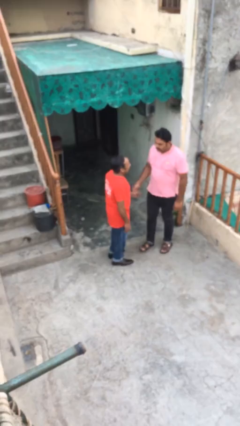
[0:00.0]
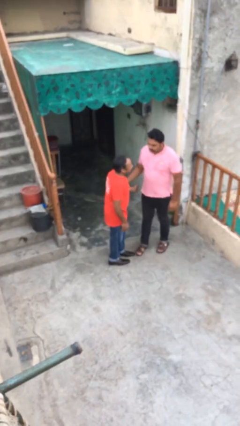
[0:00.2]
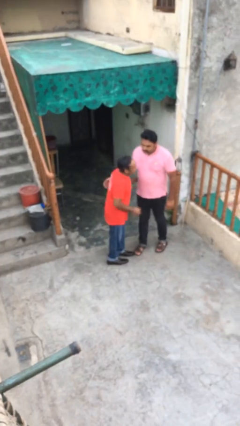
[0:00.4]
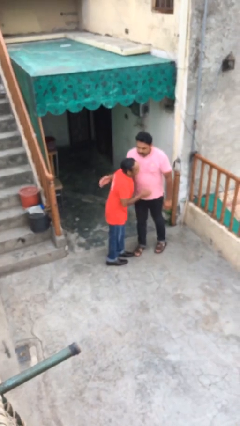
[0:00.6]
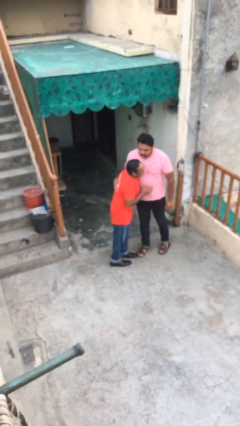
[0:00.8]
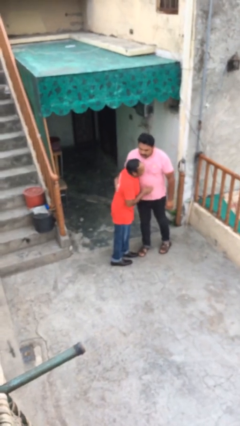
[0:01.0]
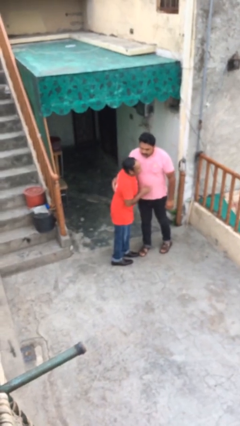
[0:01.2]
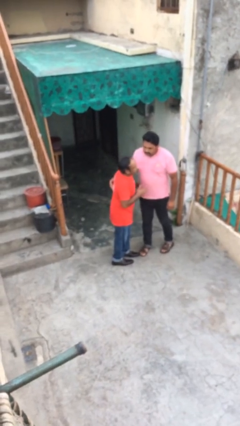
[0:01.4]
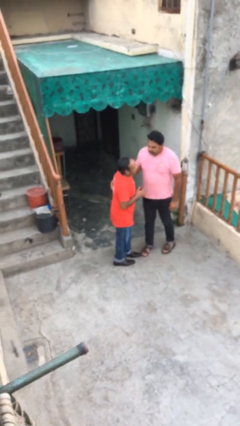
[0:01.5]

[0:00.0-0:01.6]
person embraces person

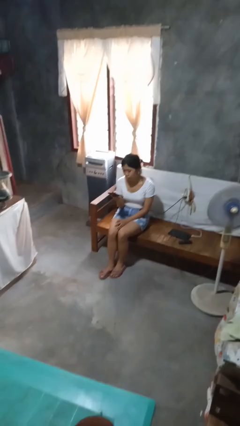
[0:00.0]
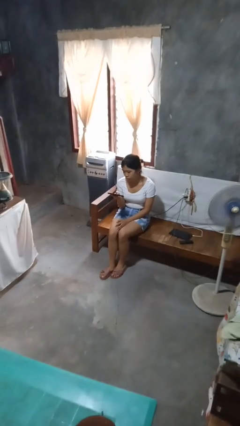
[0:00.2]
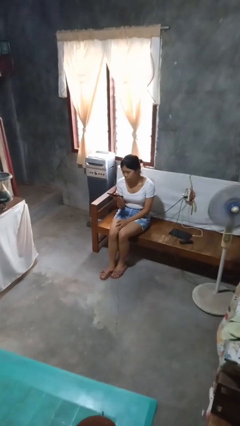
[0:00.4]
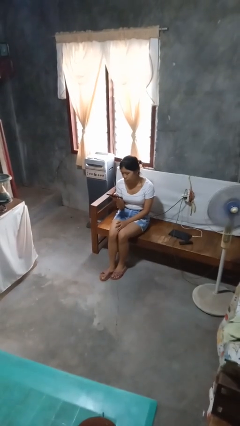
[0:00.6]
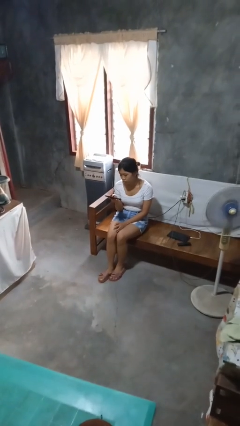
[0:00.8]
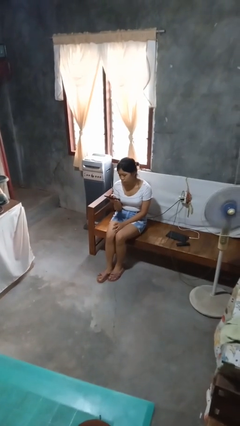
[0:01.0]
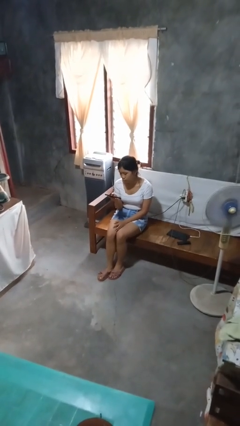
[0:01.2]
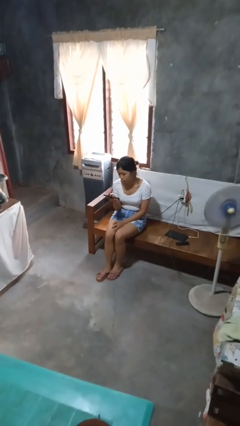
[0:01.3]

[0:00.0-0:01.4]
person takes phone from pocket

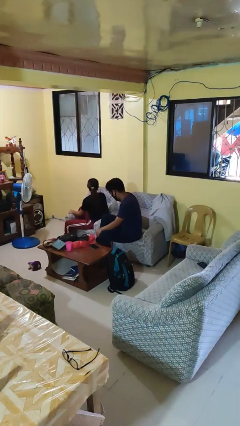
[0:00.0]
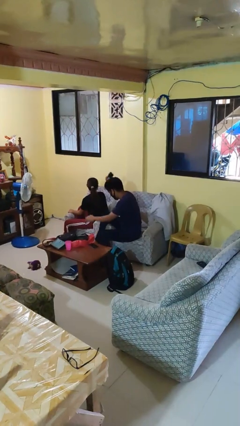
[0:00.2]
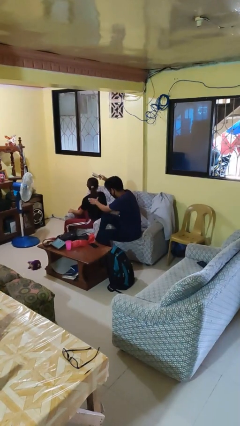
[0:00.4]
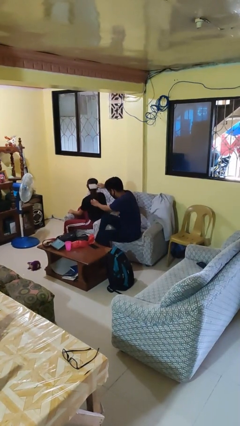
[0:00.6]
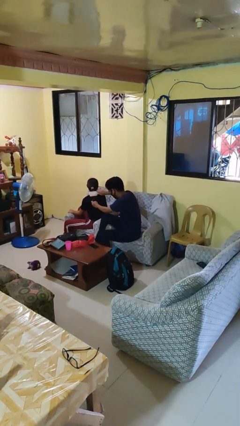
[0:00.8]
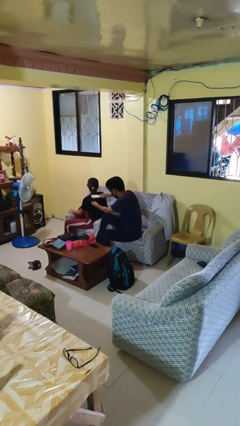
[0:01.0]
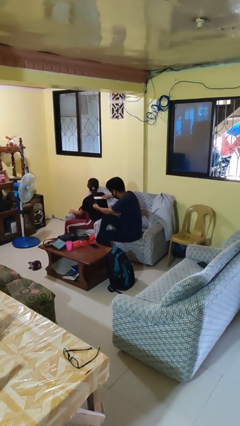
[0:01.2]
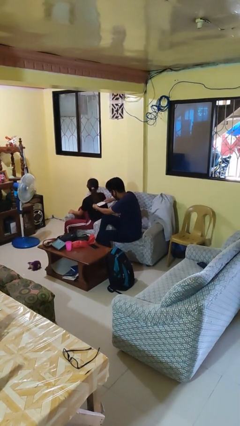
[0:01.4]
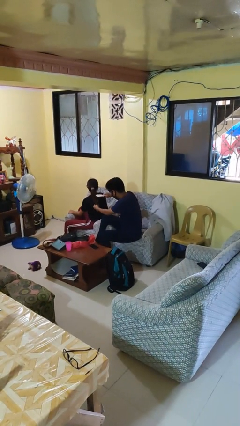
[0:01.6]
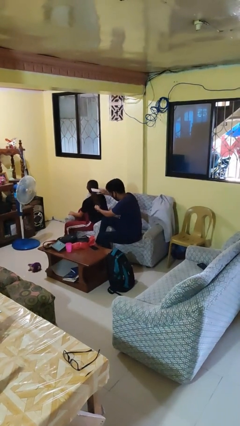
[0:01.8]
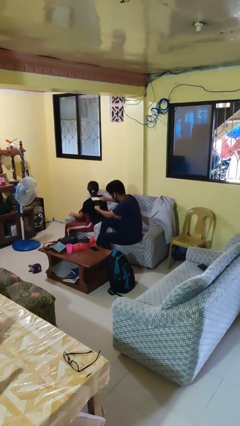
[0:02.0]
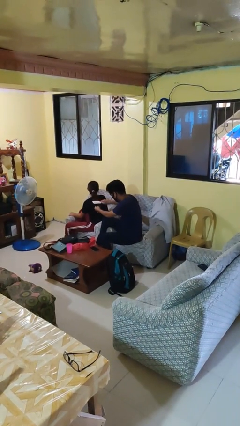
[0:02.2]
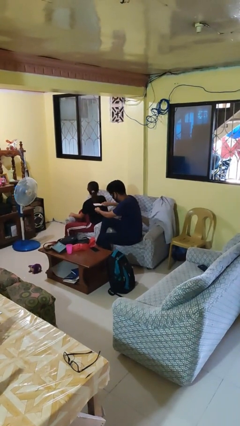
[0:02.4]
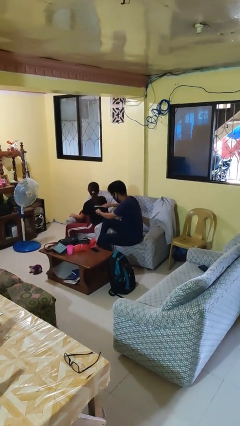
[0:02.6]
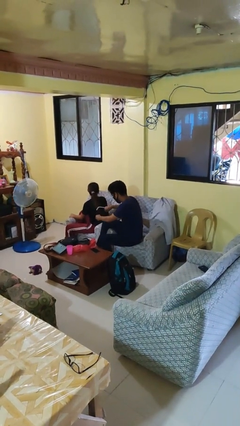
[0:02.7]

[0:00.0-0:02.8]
person brushes hair of person

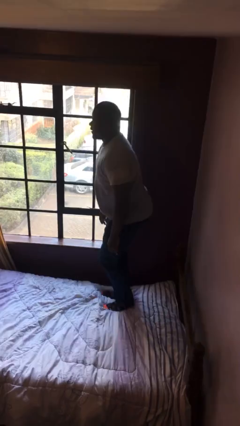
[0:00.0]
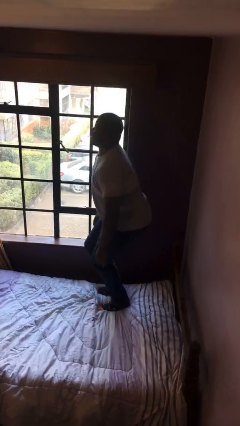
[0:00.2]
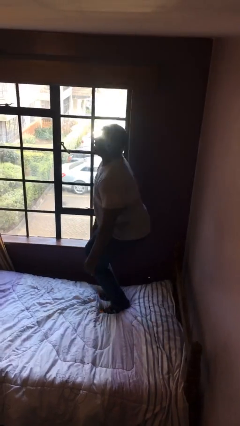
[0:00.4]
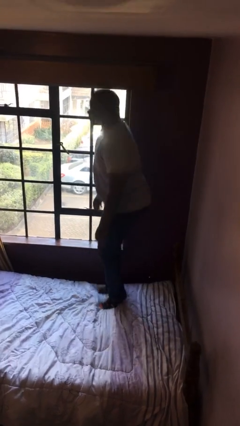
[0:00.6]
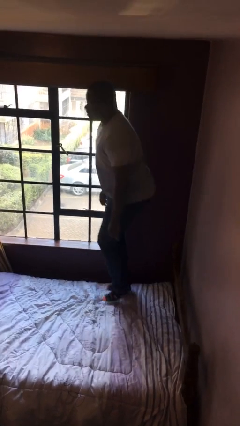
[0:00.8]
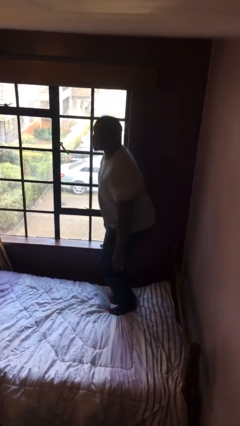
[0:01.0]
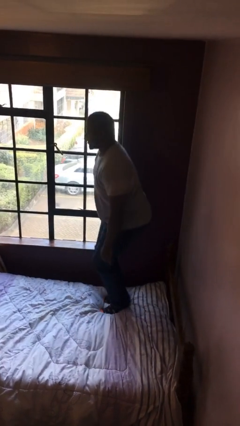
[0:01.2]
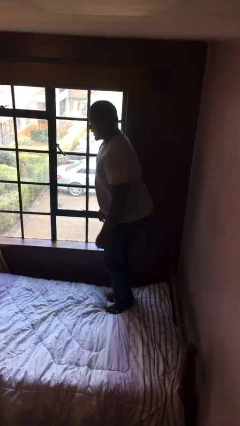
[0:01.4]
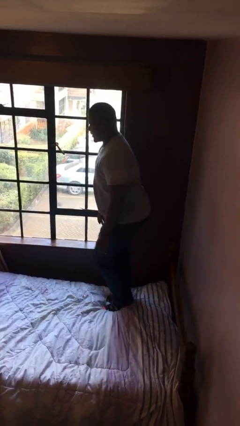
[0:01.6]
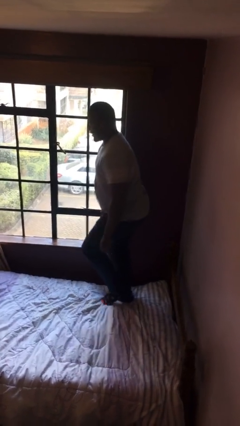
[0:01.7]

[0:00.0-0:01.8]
person jumps on bed

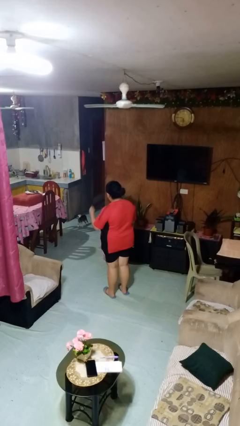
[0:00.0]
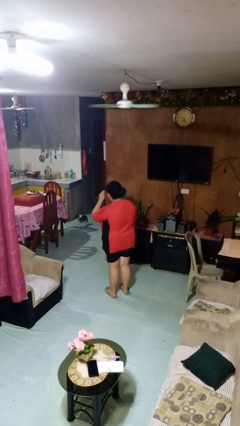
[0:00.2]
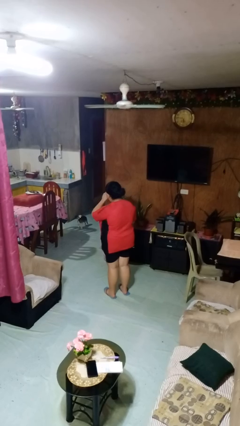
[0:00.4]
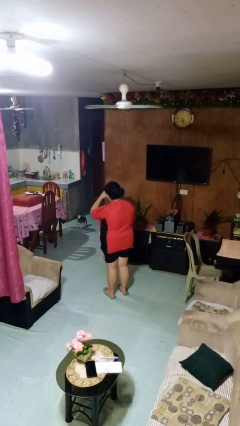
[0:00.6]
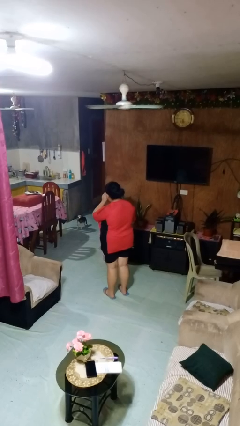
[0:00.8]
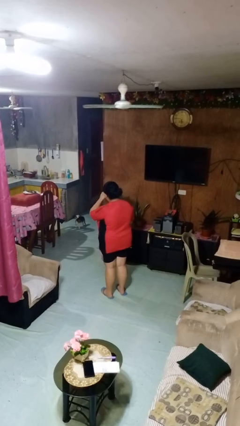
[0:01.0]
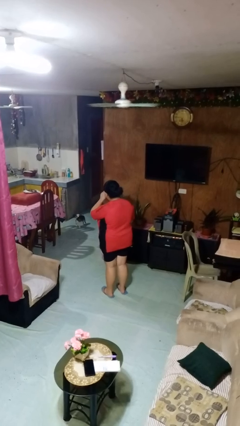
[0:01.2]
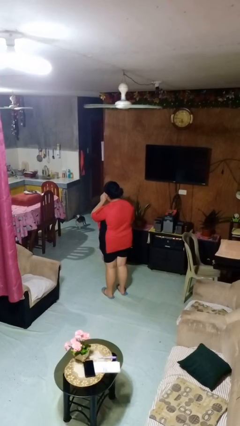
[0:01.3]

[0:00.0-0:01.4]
person rubs eyes

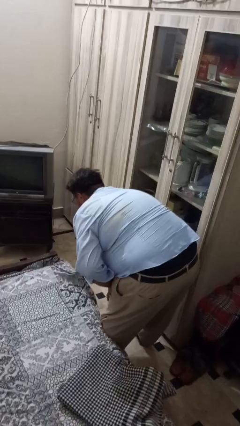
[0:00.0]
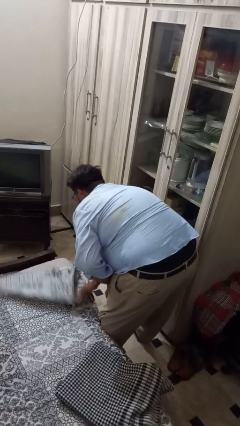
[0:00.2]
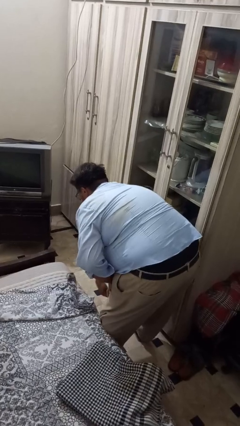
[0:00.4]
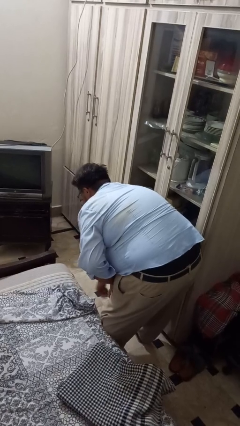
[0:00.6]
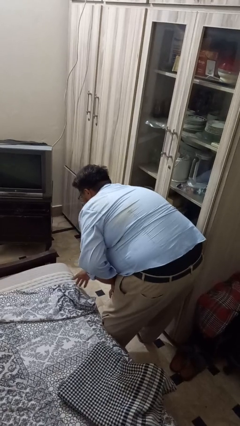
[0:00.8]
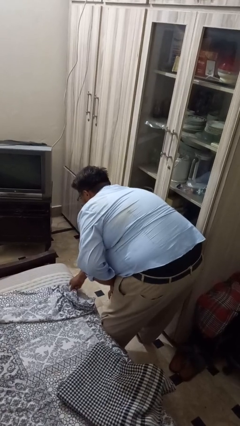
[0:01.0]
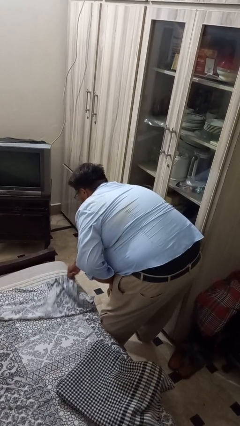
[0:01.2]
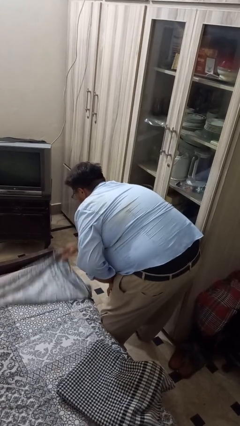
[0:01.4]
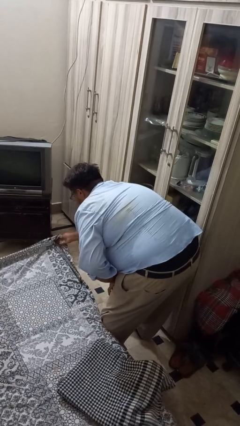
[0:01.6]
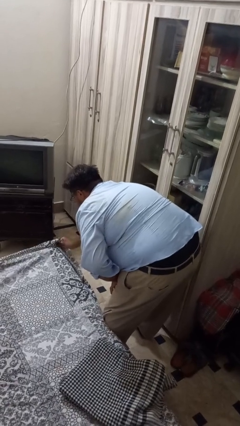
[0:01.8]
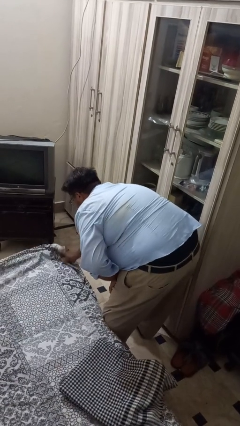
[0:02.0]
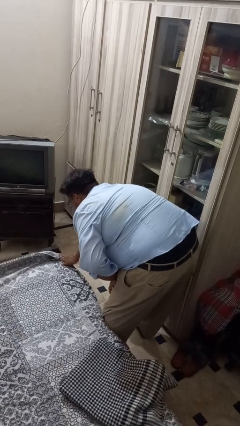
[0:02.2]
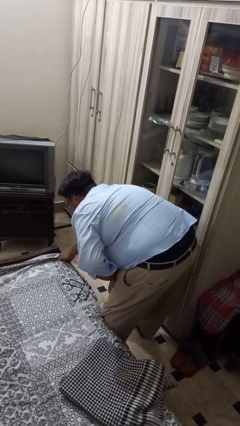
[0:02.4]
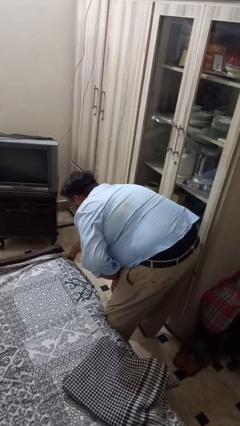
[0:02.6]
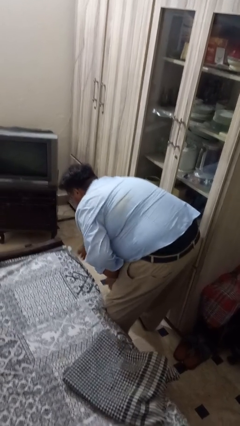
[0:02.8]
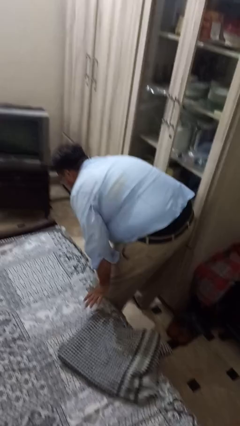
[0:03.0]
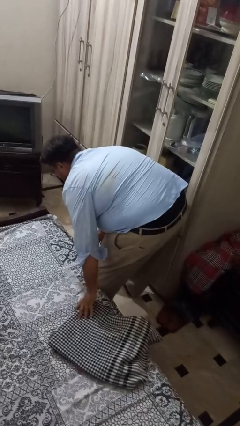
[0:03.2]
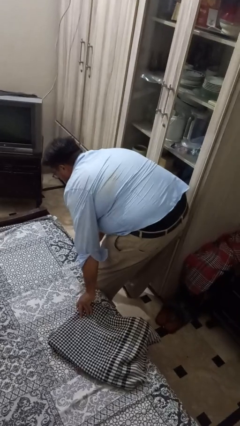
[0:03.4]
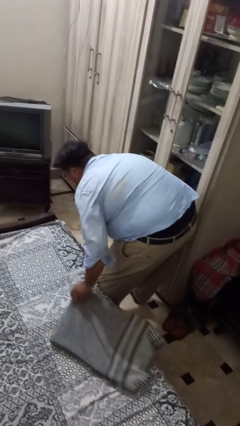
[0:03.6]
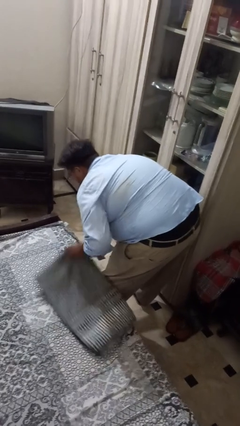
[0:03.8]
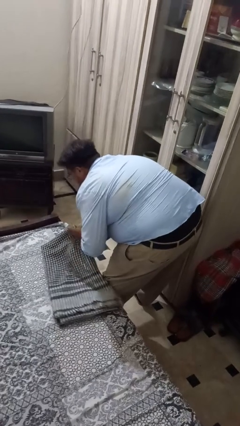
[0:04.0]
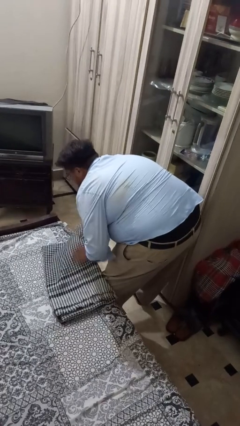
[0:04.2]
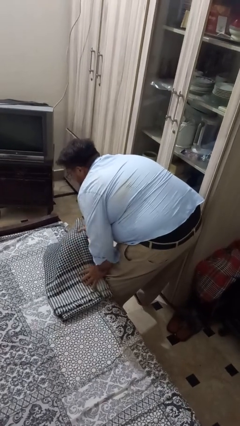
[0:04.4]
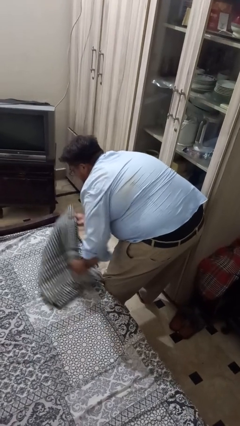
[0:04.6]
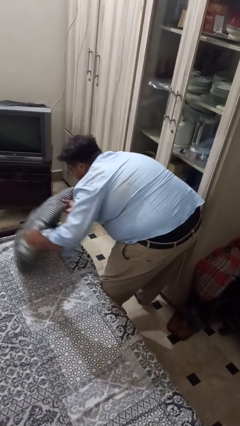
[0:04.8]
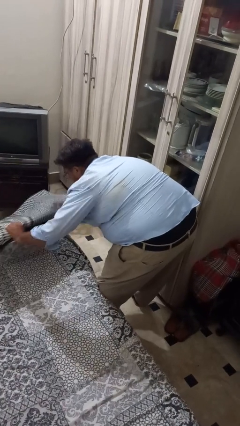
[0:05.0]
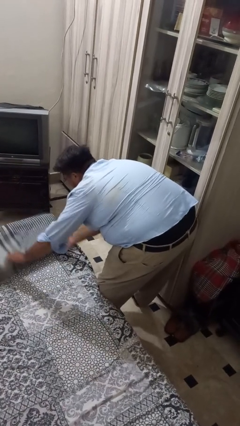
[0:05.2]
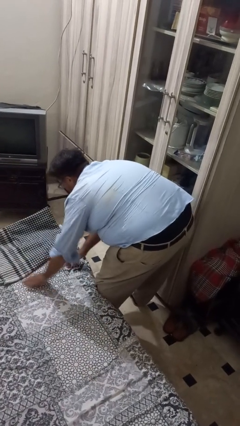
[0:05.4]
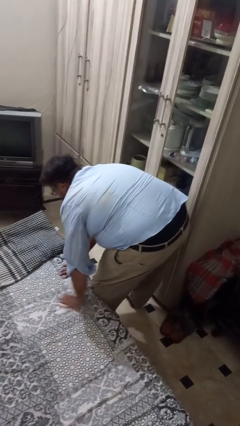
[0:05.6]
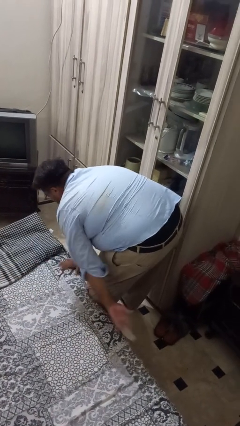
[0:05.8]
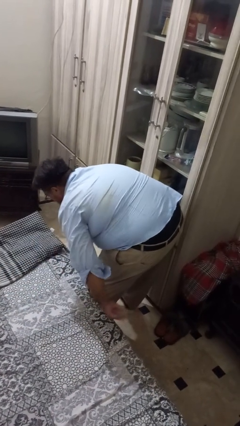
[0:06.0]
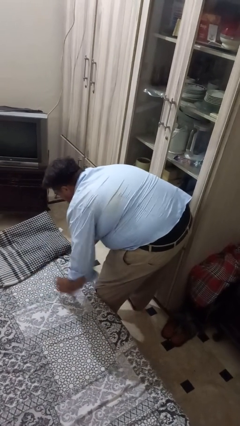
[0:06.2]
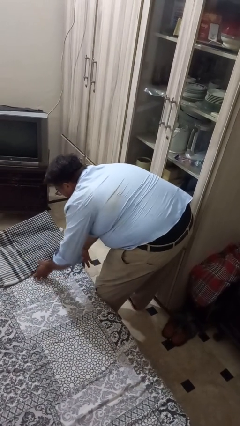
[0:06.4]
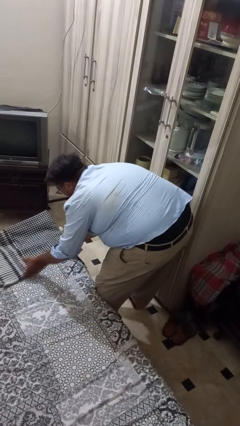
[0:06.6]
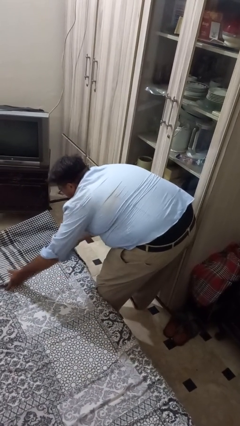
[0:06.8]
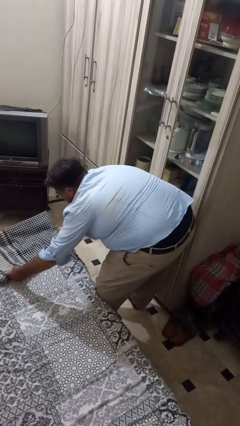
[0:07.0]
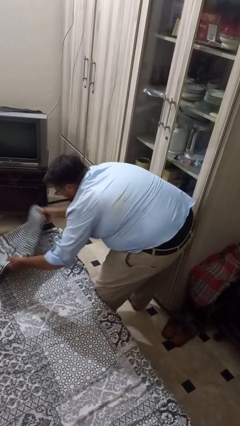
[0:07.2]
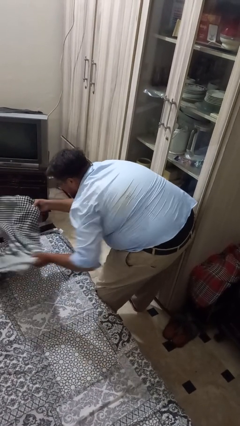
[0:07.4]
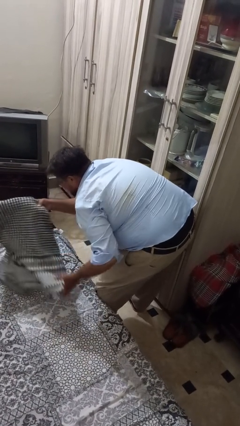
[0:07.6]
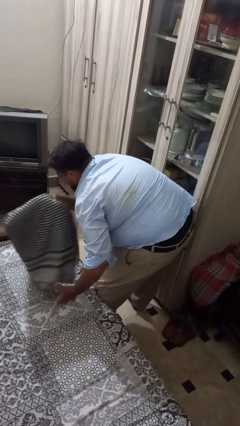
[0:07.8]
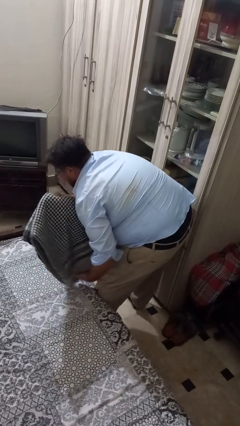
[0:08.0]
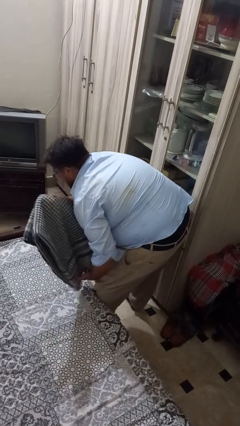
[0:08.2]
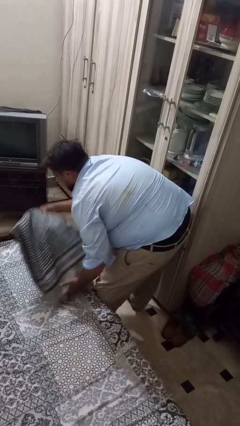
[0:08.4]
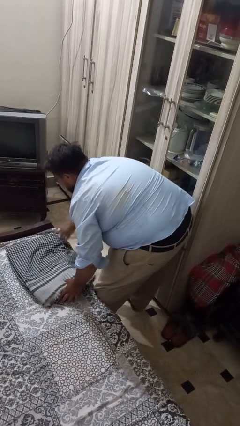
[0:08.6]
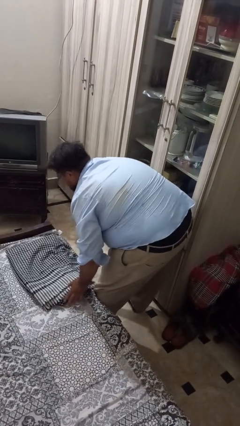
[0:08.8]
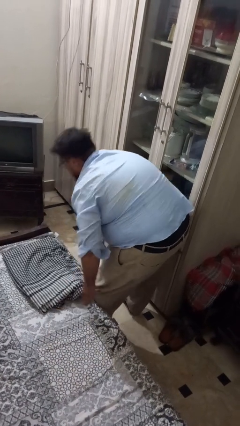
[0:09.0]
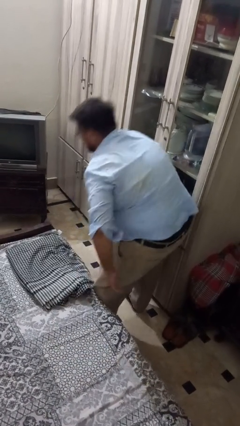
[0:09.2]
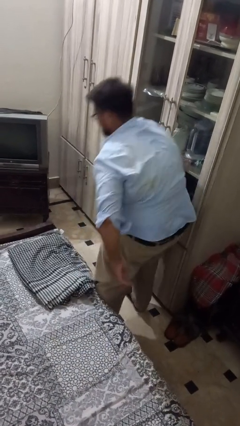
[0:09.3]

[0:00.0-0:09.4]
person makes bed
